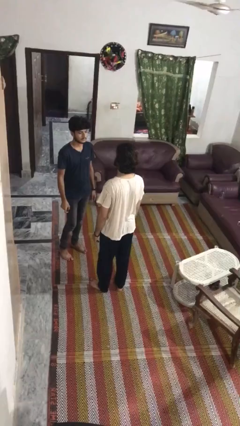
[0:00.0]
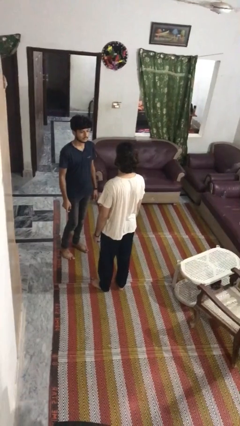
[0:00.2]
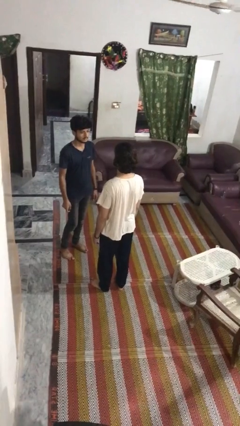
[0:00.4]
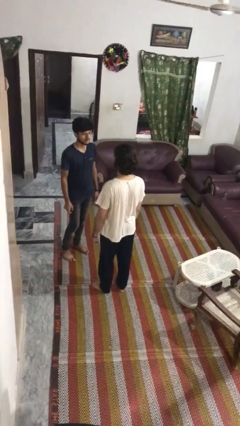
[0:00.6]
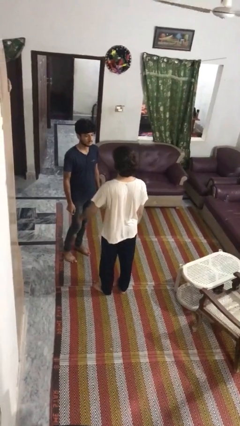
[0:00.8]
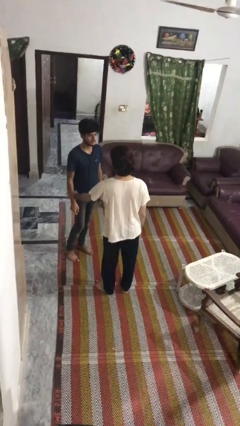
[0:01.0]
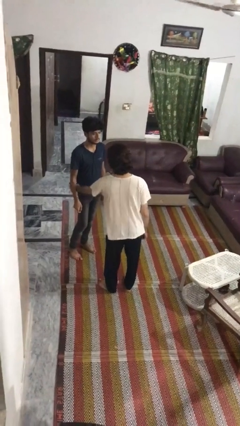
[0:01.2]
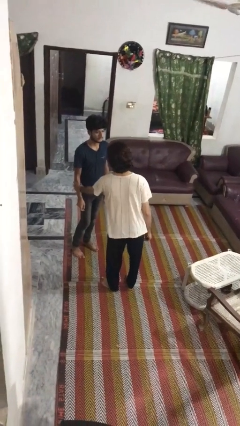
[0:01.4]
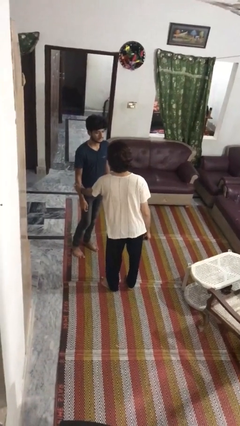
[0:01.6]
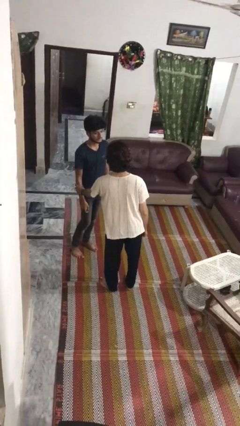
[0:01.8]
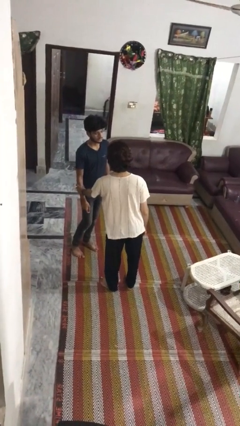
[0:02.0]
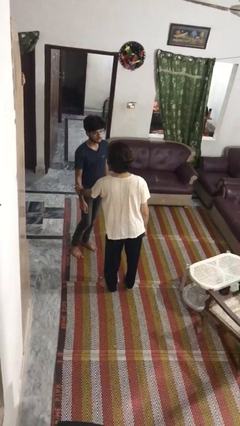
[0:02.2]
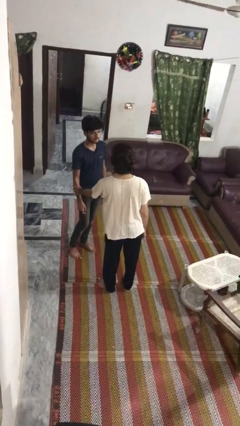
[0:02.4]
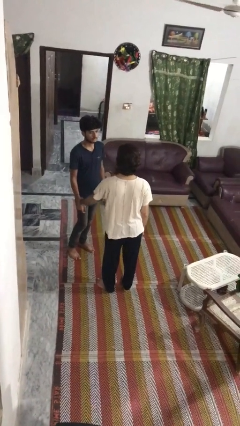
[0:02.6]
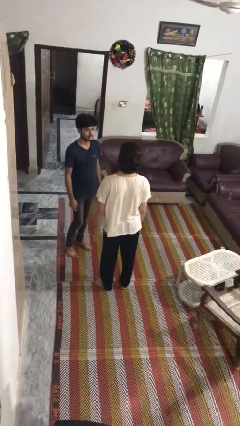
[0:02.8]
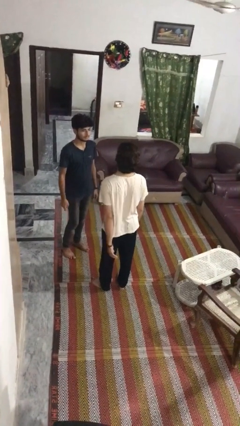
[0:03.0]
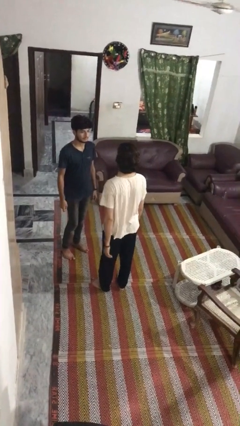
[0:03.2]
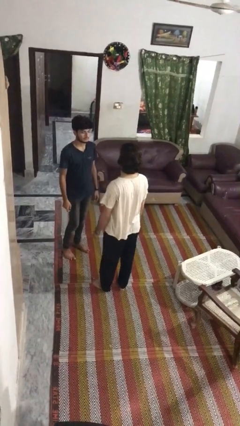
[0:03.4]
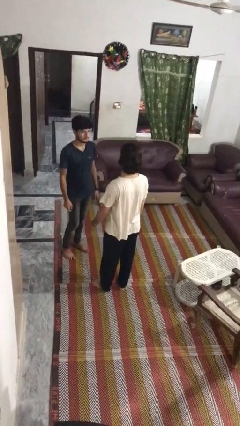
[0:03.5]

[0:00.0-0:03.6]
person grabs person by forearm

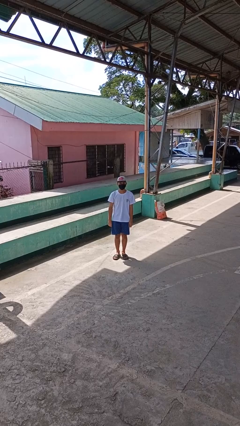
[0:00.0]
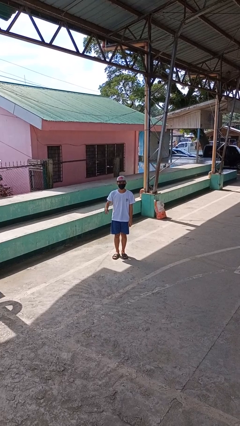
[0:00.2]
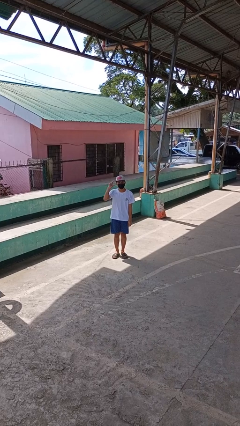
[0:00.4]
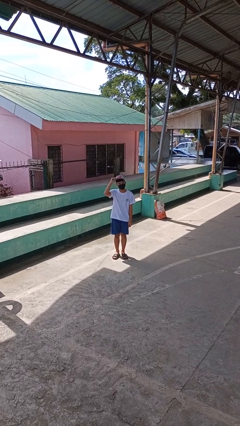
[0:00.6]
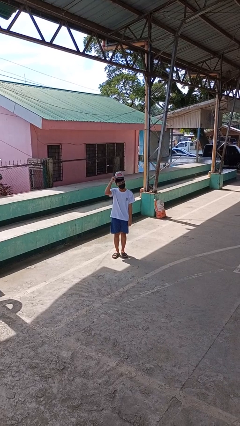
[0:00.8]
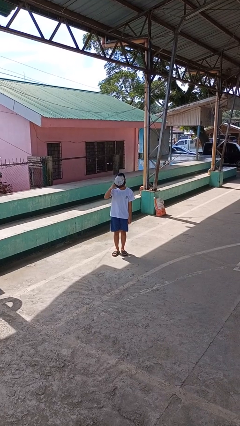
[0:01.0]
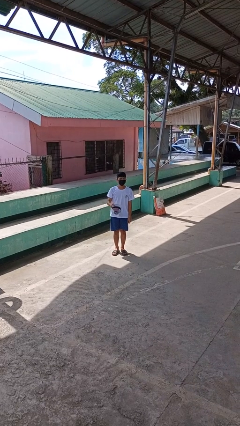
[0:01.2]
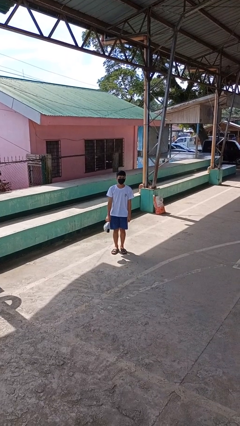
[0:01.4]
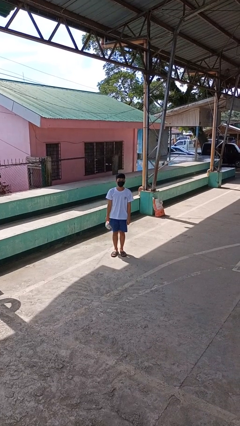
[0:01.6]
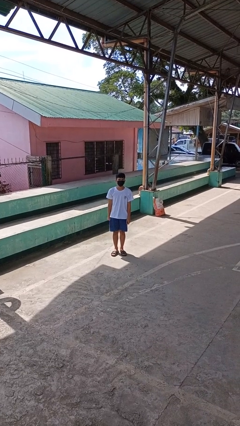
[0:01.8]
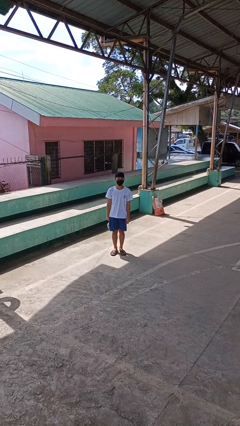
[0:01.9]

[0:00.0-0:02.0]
person takes off hat

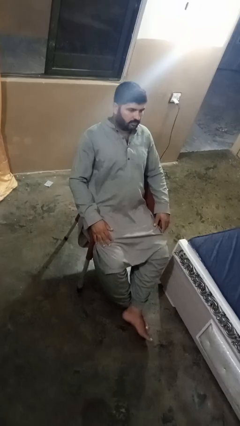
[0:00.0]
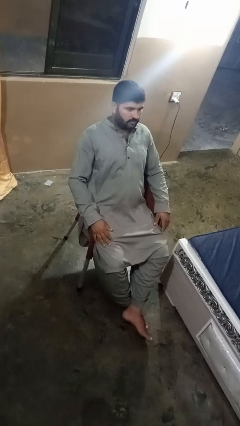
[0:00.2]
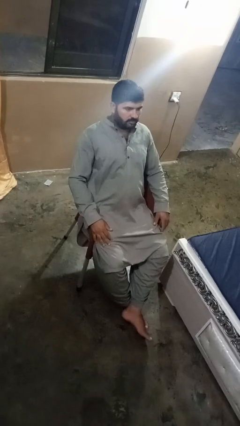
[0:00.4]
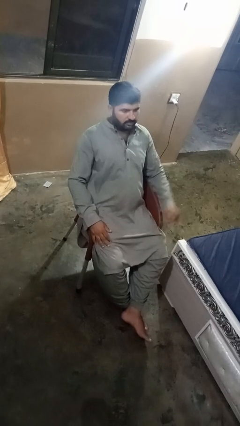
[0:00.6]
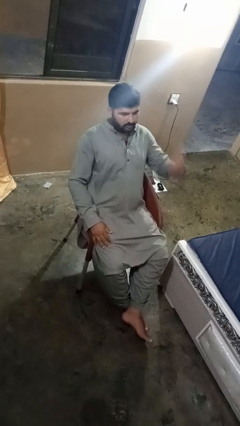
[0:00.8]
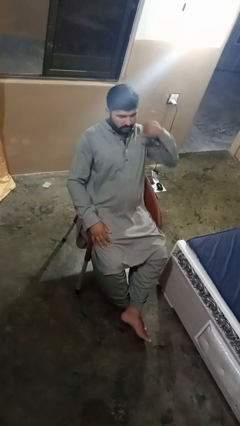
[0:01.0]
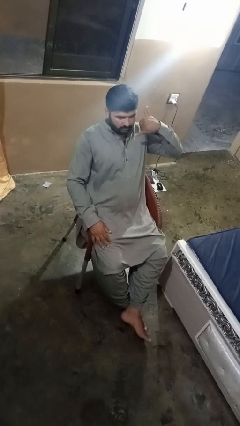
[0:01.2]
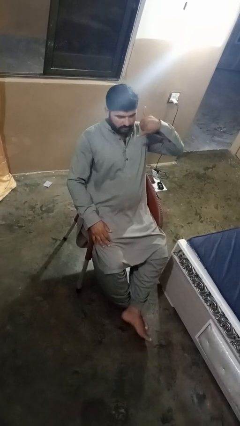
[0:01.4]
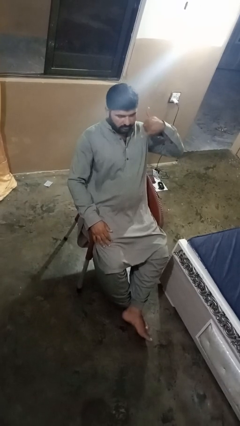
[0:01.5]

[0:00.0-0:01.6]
person gestures call me

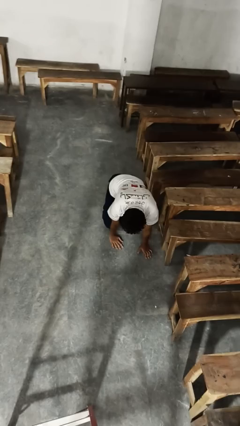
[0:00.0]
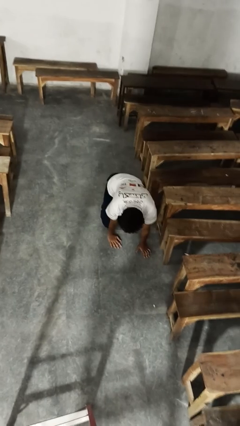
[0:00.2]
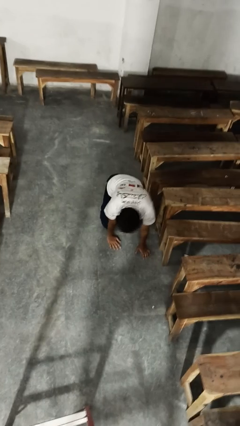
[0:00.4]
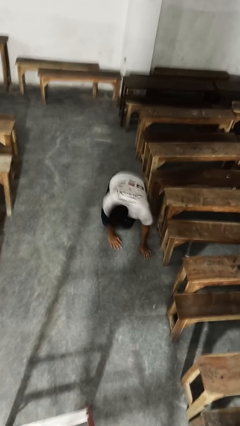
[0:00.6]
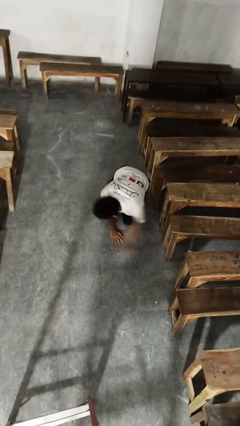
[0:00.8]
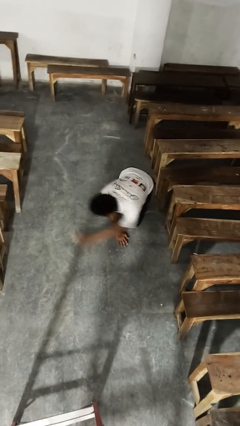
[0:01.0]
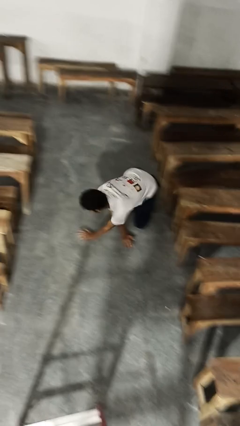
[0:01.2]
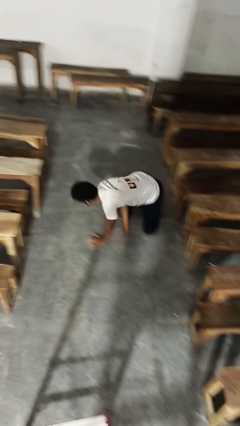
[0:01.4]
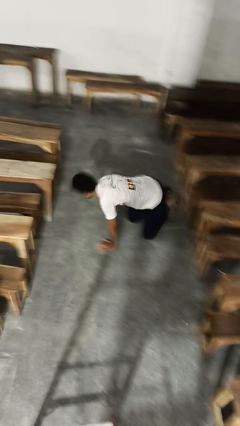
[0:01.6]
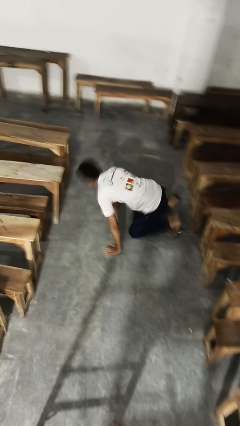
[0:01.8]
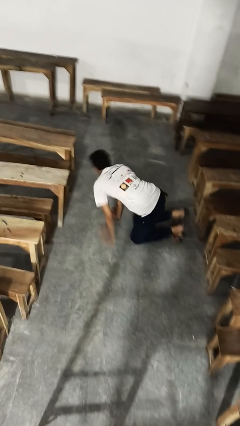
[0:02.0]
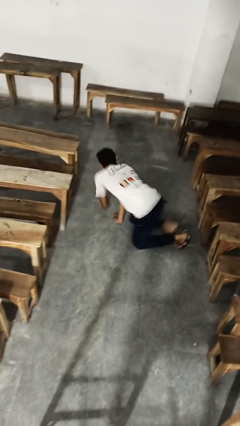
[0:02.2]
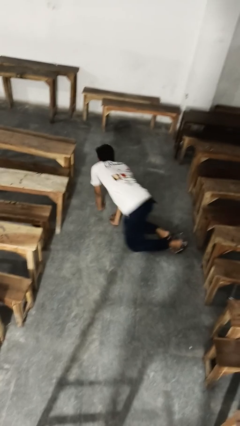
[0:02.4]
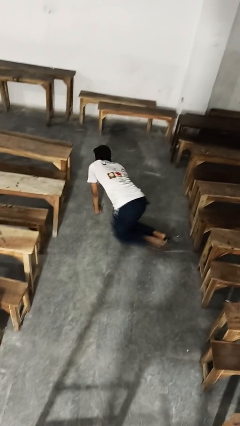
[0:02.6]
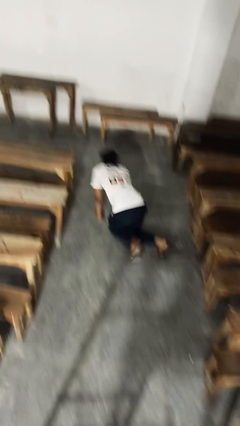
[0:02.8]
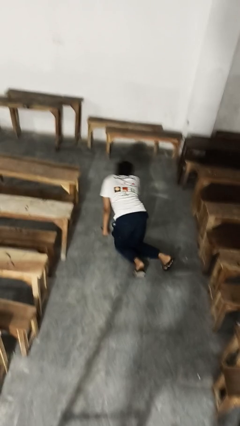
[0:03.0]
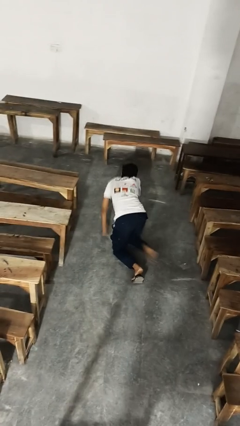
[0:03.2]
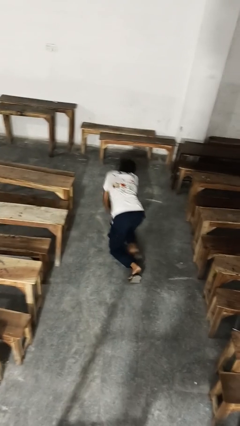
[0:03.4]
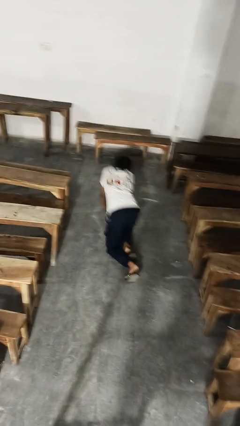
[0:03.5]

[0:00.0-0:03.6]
person crawls

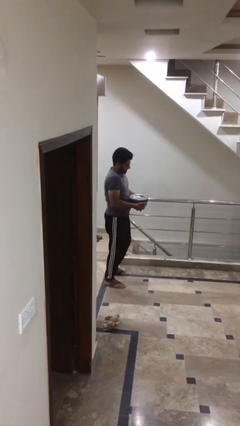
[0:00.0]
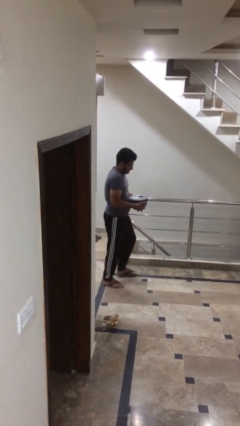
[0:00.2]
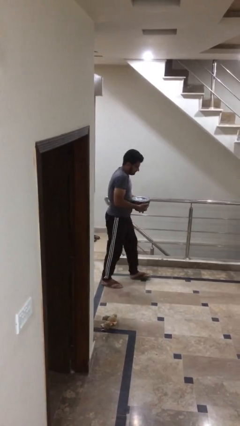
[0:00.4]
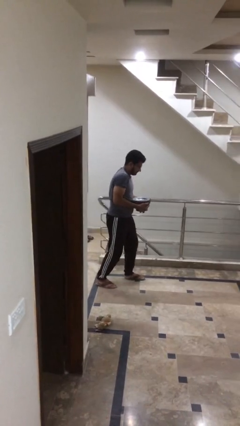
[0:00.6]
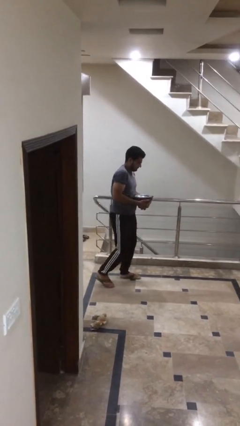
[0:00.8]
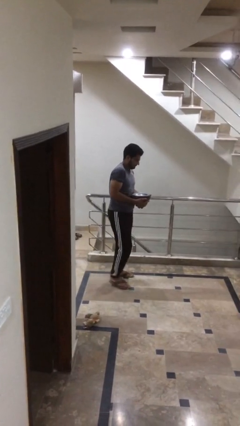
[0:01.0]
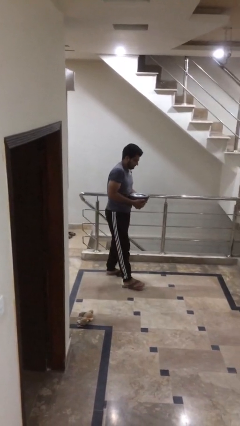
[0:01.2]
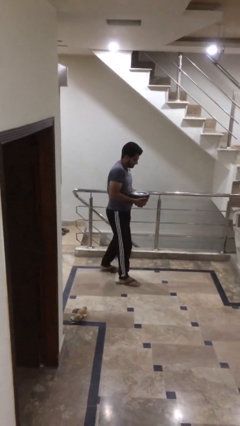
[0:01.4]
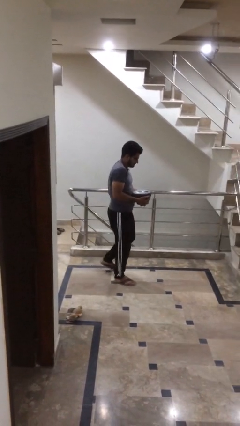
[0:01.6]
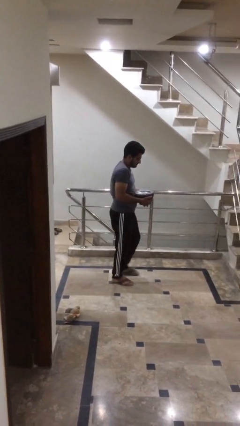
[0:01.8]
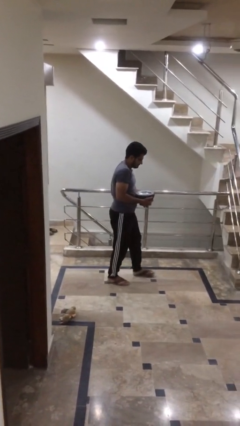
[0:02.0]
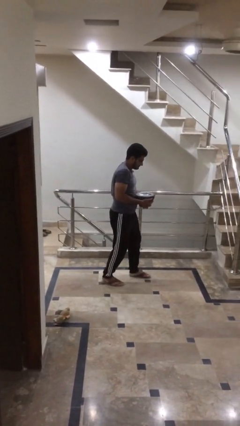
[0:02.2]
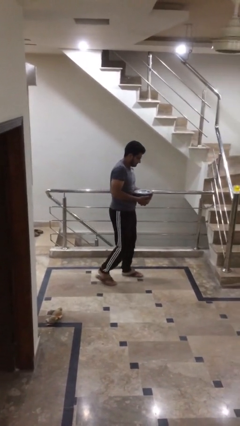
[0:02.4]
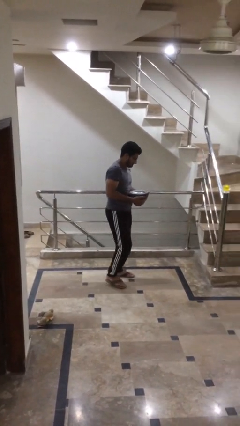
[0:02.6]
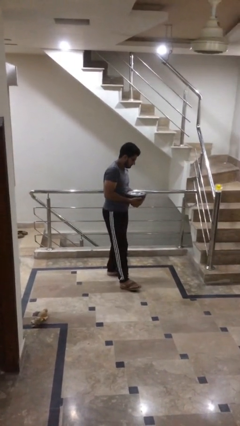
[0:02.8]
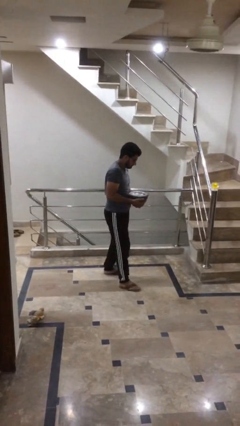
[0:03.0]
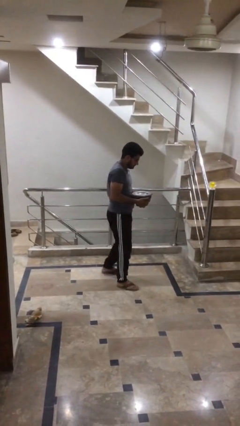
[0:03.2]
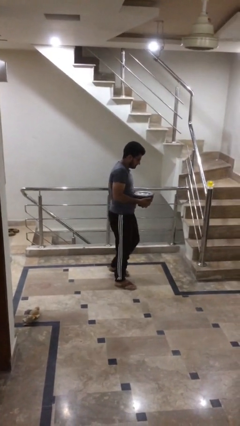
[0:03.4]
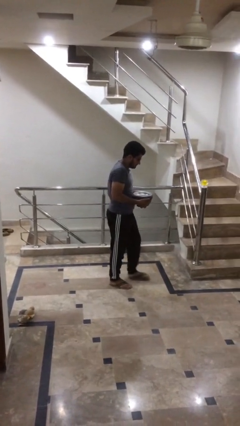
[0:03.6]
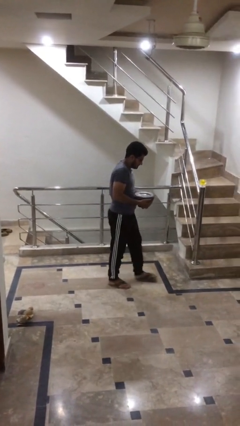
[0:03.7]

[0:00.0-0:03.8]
person carries heavy object

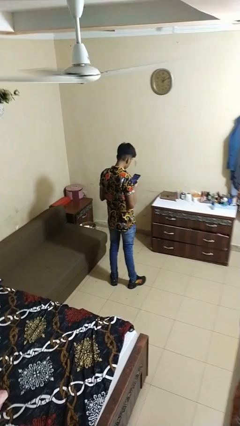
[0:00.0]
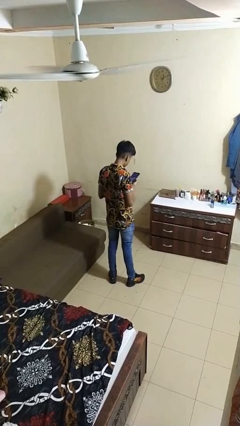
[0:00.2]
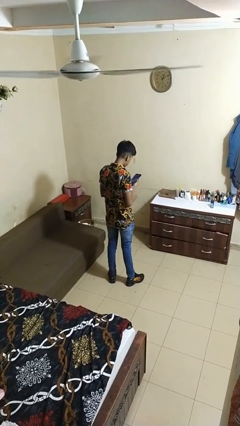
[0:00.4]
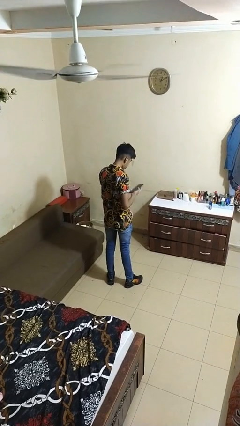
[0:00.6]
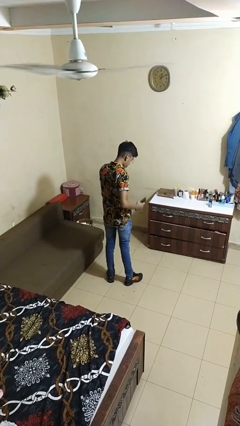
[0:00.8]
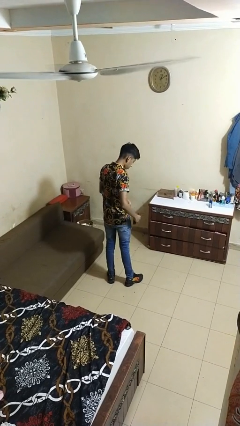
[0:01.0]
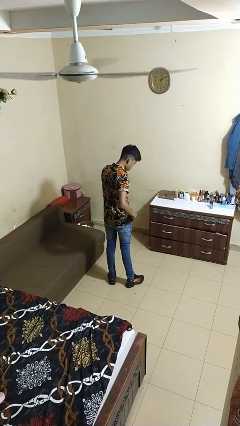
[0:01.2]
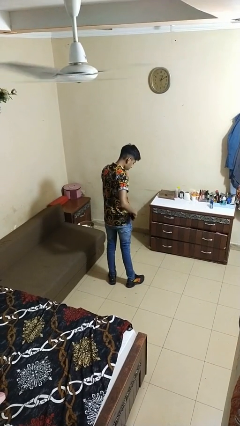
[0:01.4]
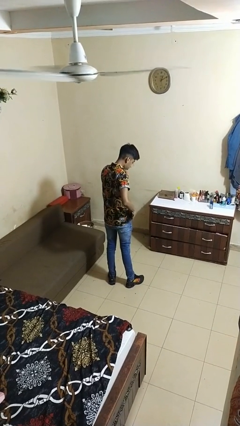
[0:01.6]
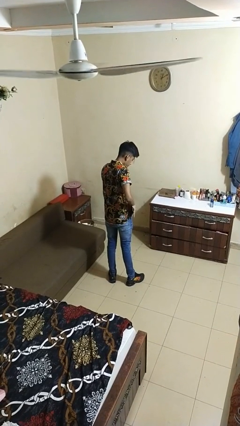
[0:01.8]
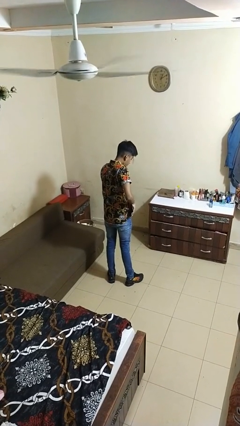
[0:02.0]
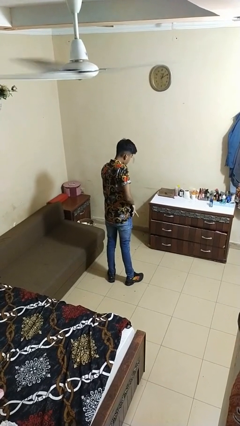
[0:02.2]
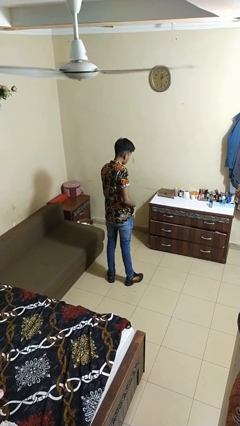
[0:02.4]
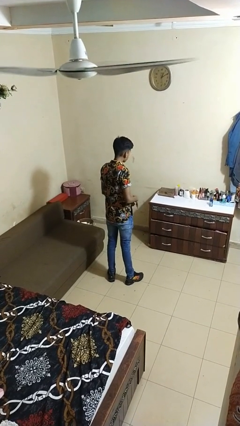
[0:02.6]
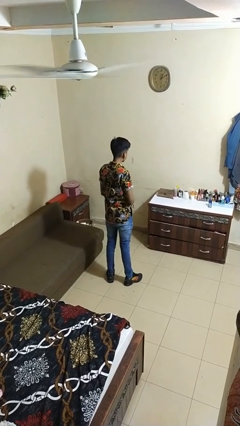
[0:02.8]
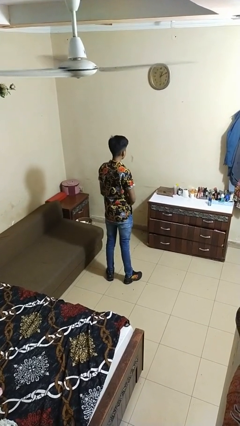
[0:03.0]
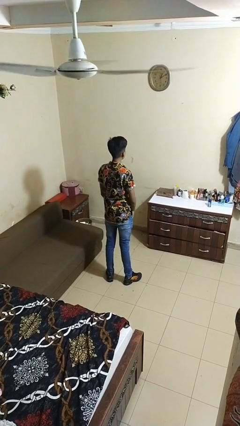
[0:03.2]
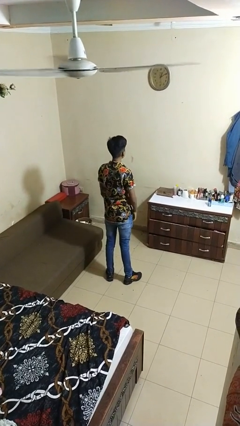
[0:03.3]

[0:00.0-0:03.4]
person puts phone into pocket
